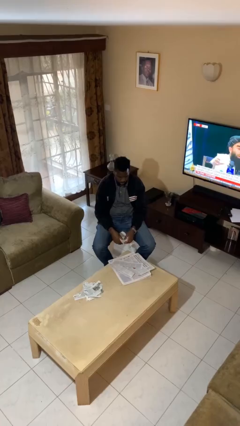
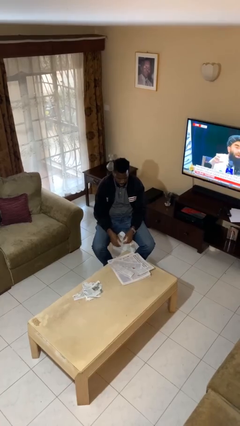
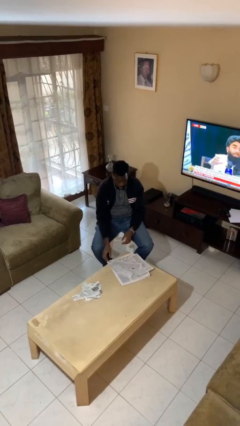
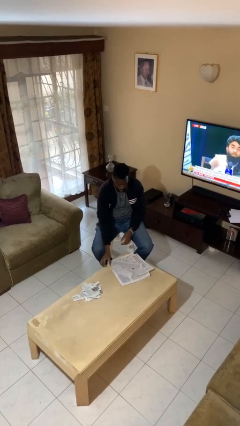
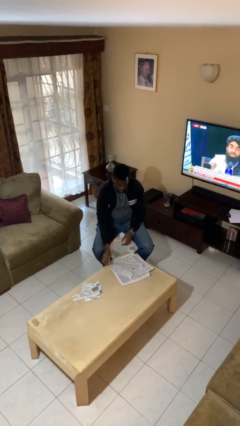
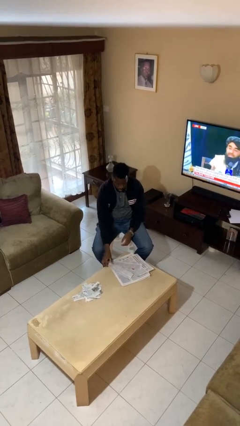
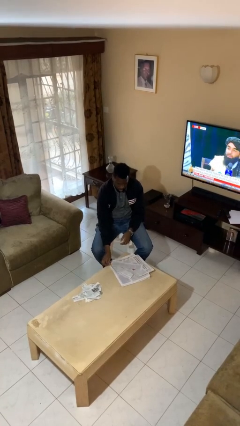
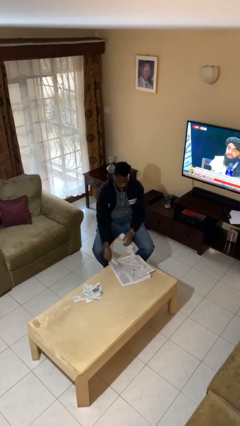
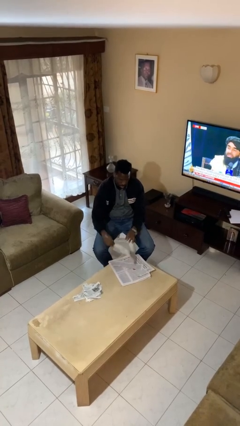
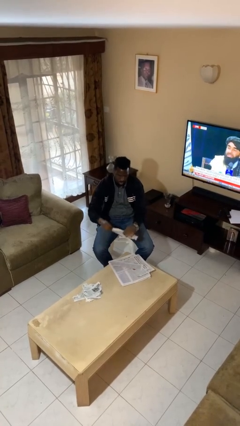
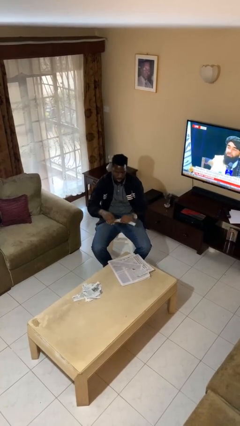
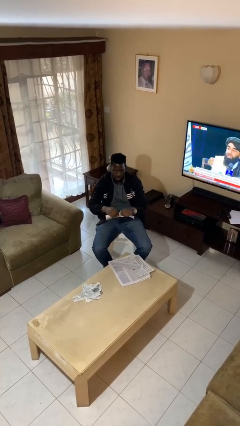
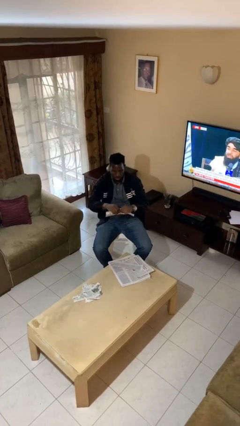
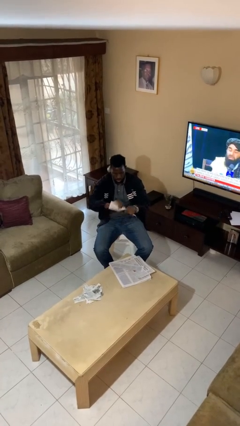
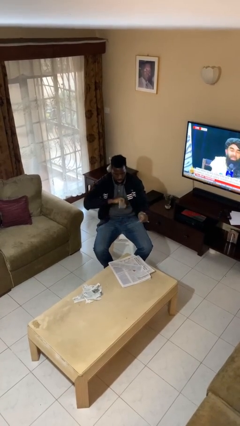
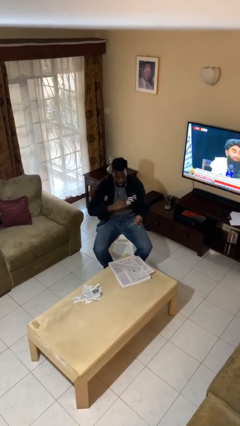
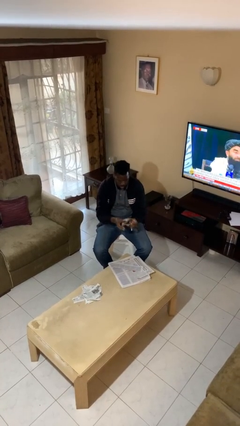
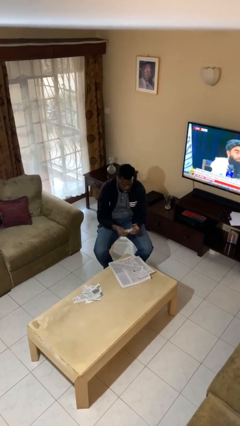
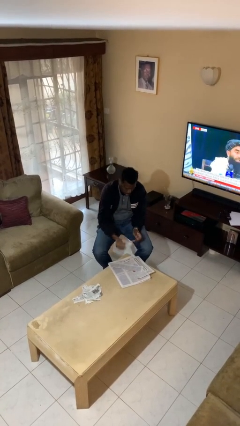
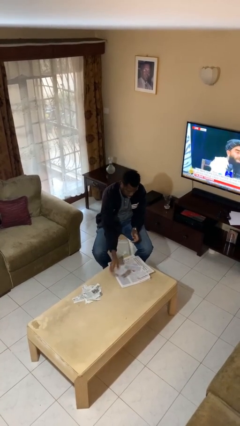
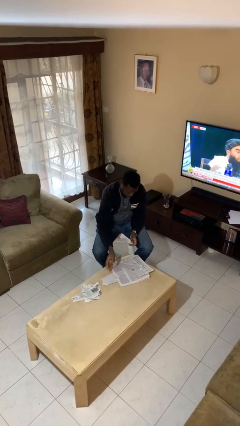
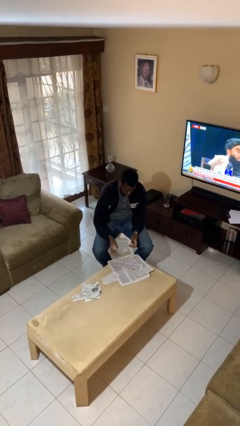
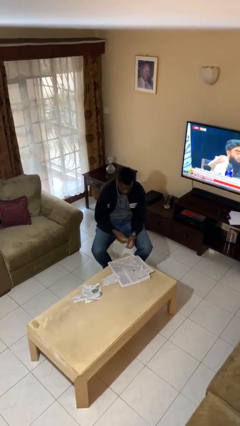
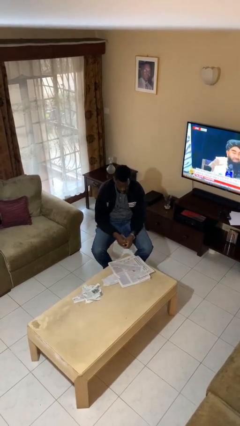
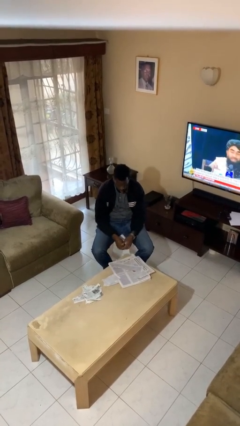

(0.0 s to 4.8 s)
person tears paper

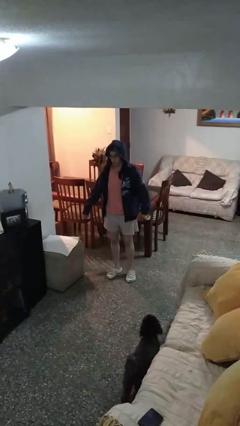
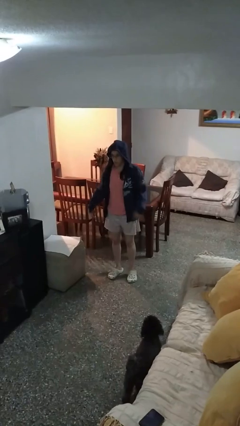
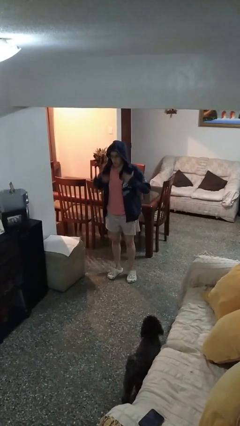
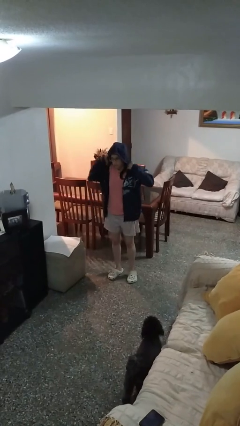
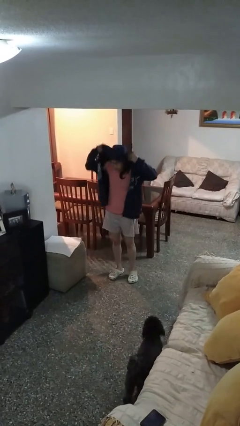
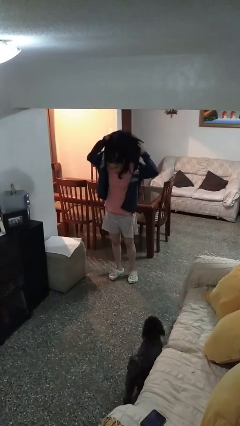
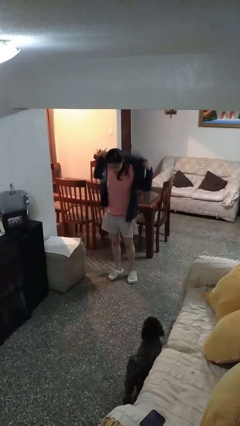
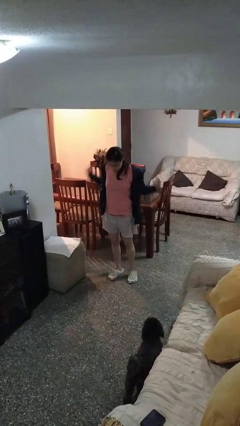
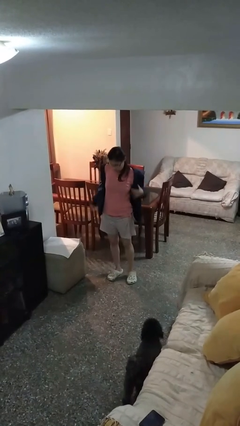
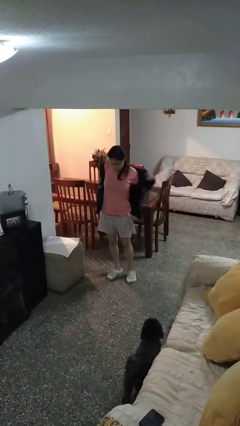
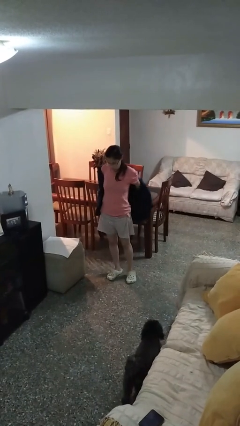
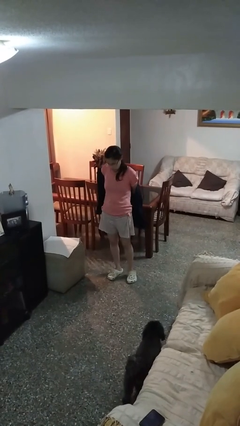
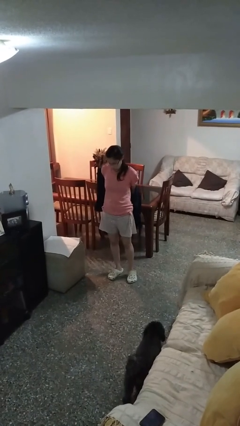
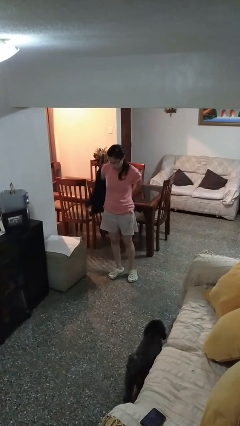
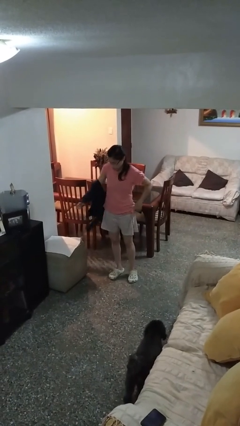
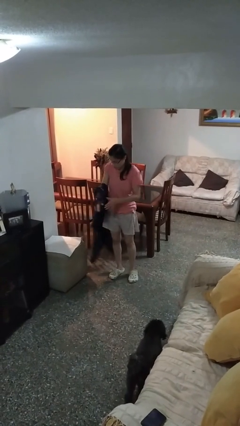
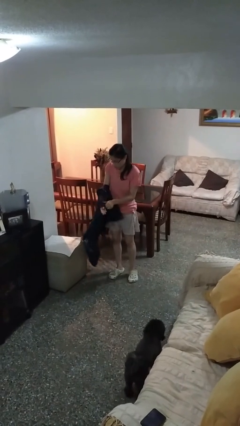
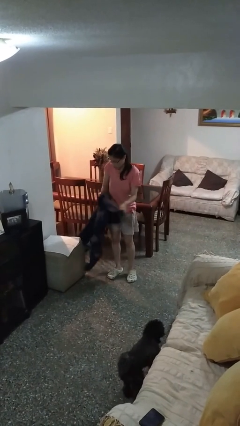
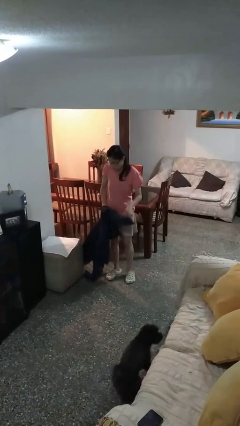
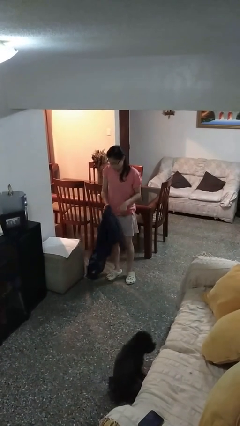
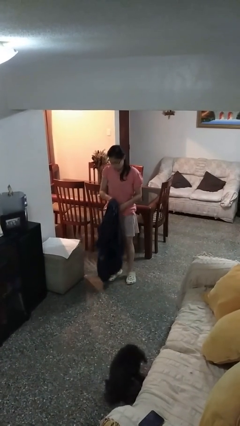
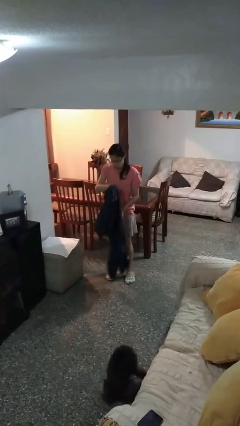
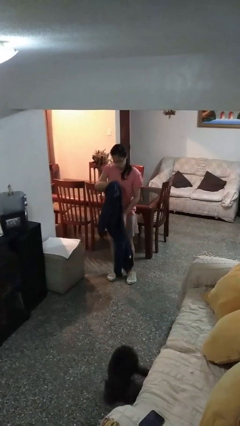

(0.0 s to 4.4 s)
person takes off hoodie

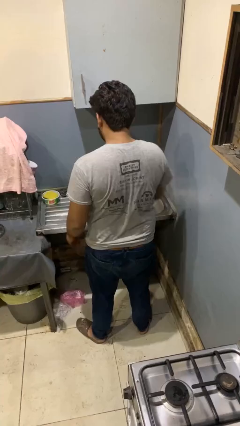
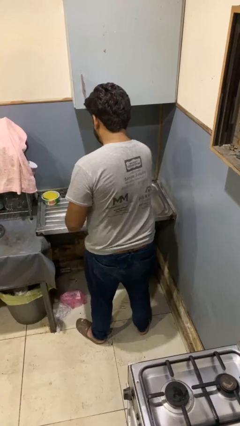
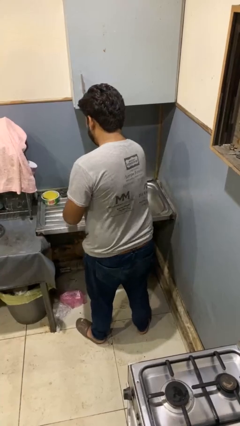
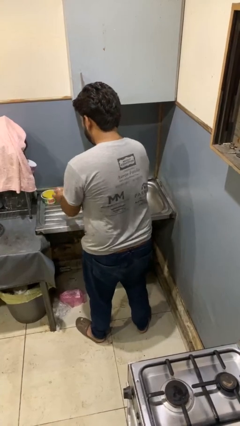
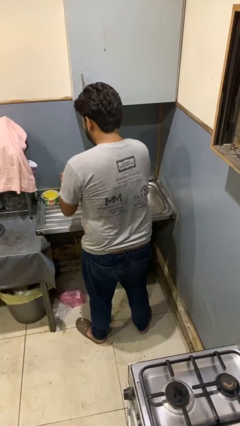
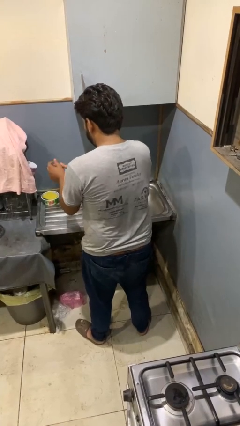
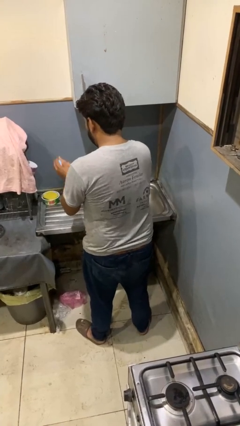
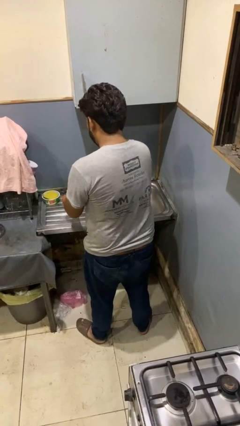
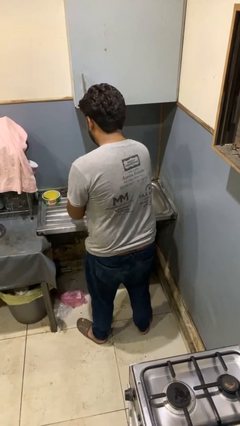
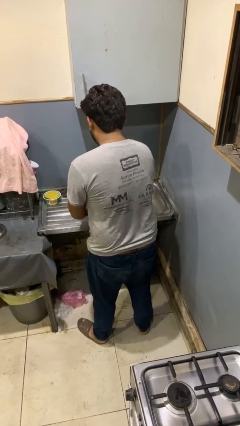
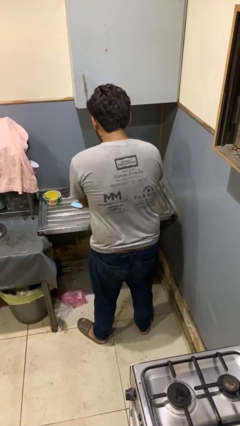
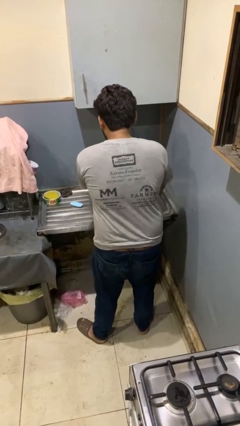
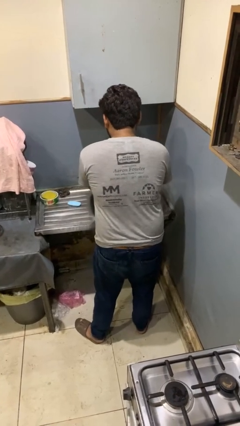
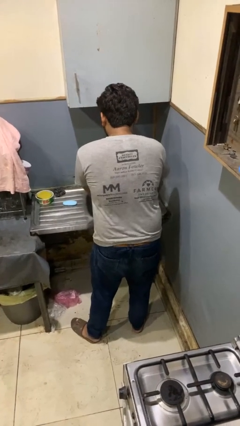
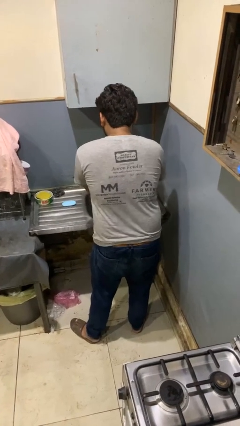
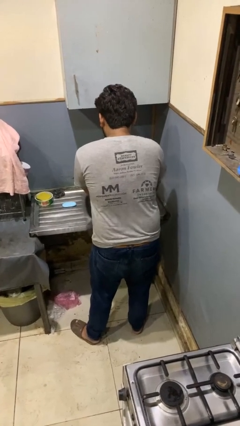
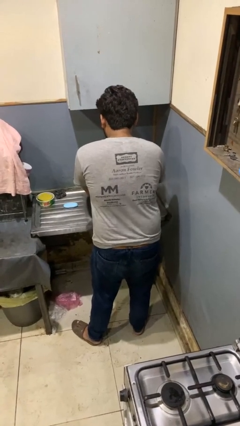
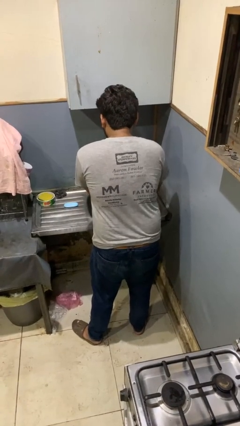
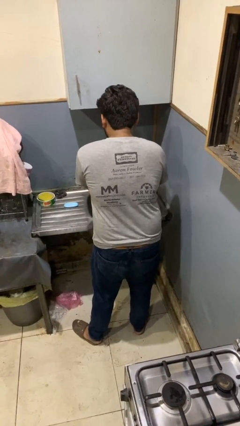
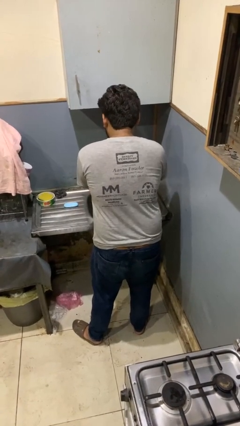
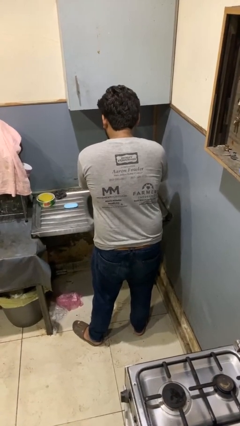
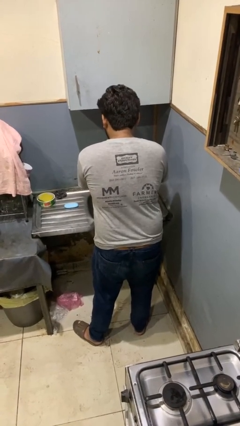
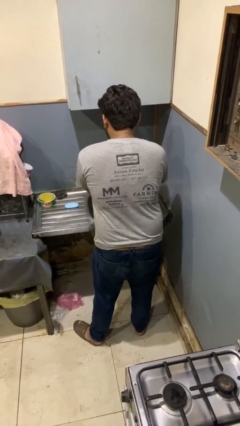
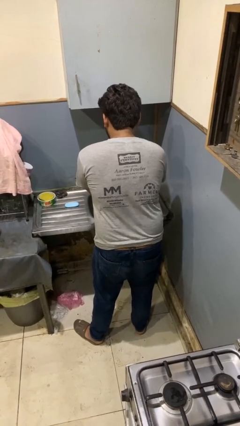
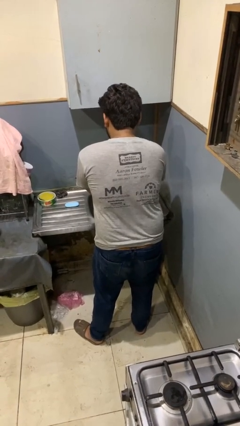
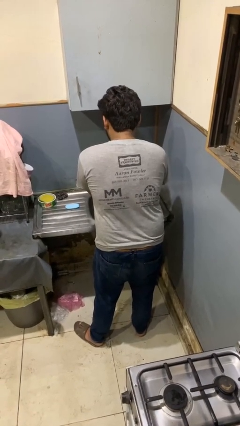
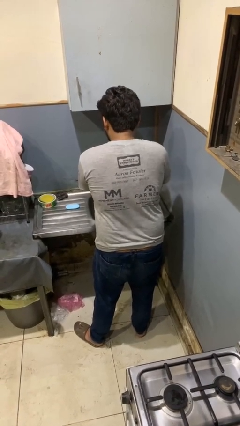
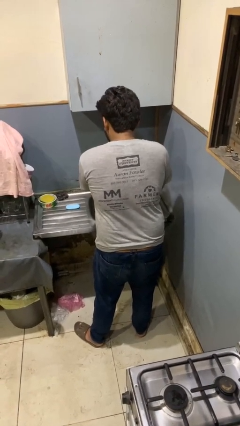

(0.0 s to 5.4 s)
person washes hands

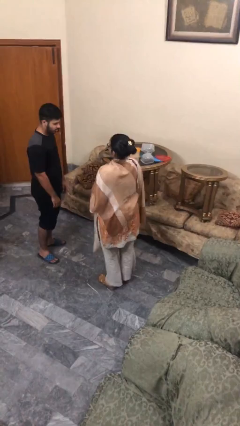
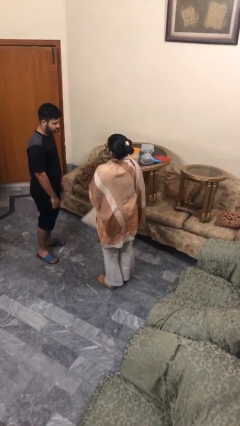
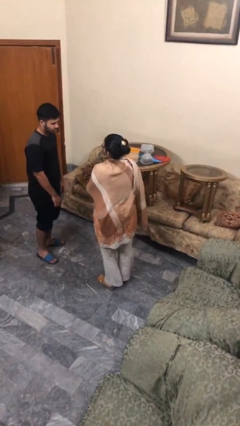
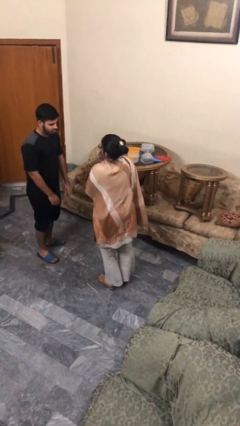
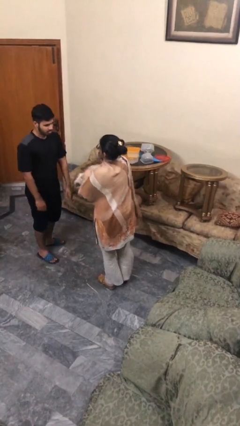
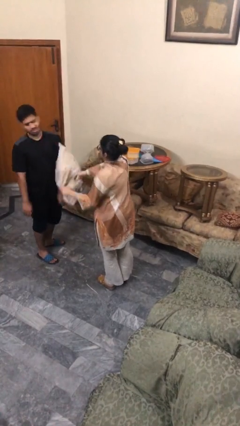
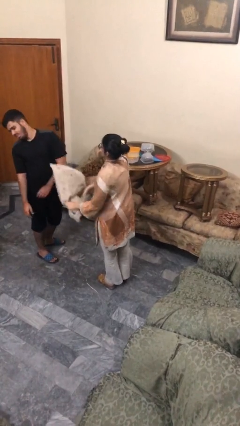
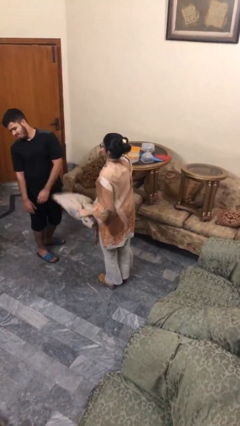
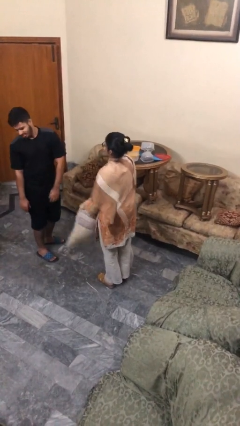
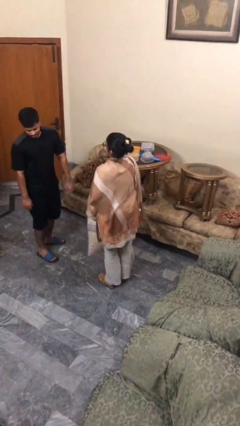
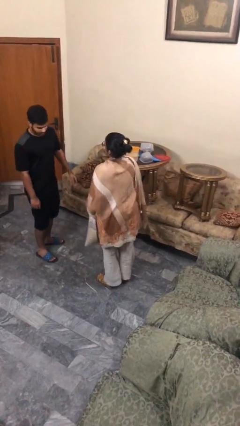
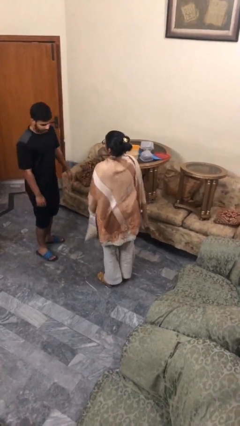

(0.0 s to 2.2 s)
person hits person with pillow

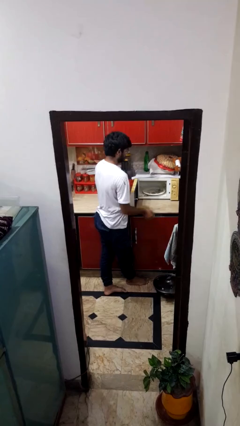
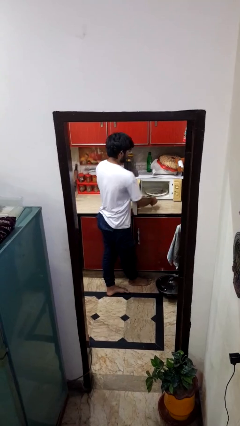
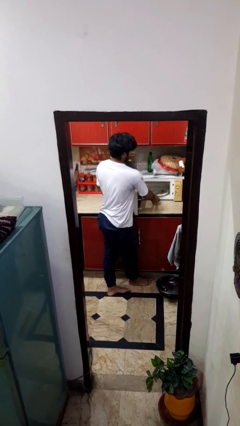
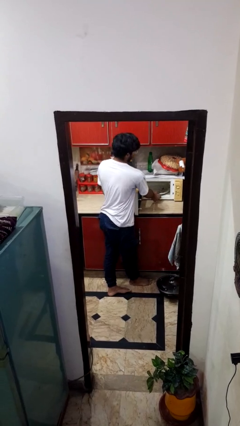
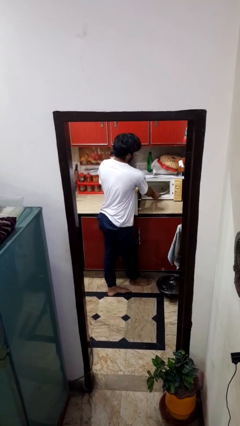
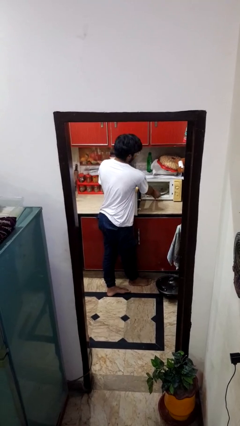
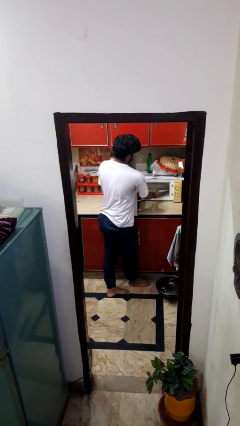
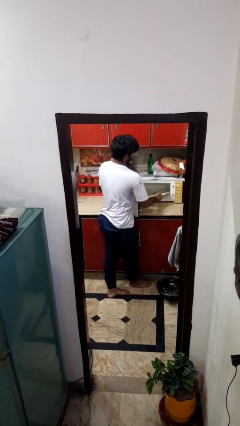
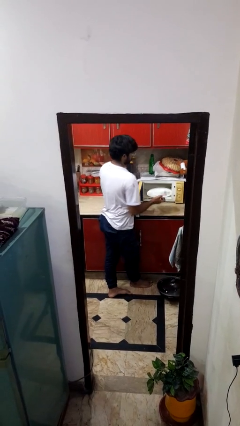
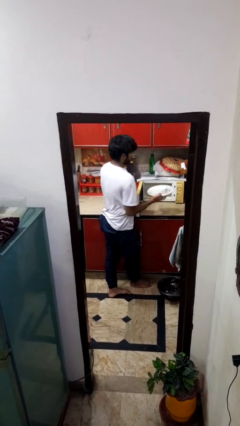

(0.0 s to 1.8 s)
person takes object from oven
